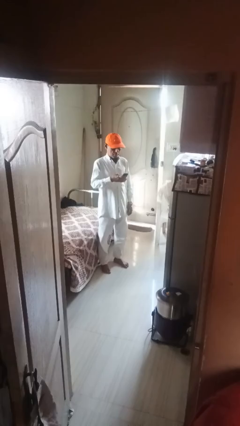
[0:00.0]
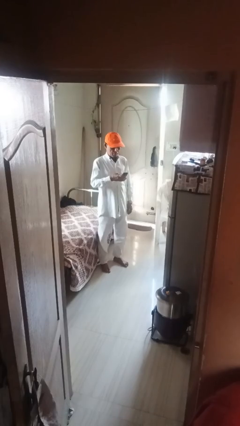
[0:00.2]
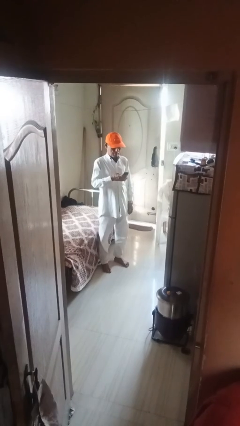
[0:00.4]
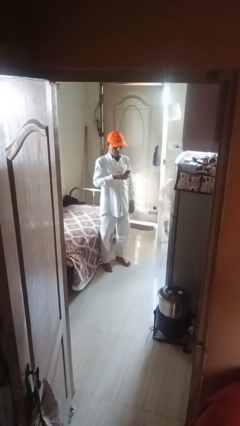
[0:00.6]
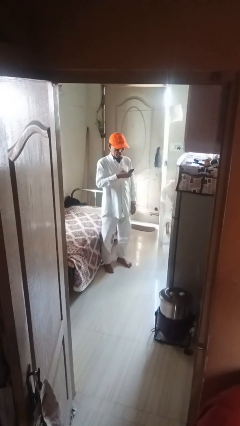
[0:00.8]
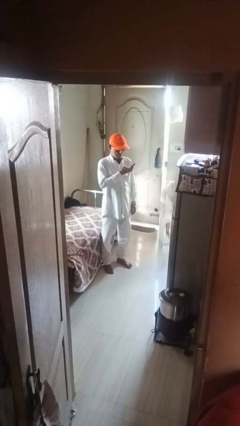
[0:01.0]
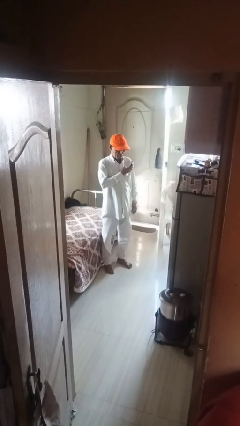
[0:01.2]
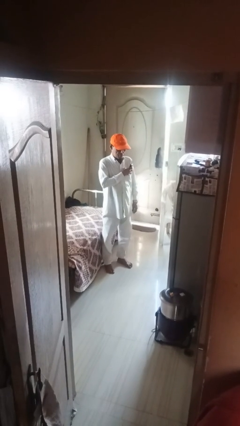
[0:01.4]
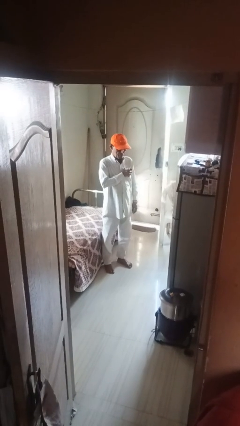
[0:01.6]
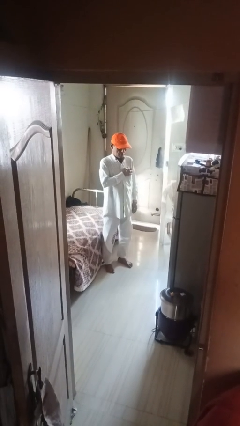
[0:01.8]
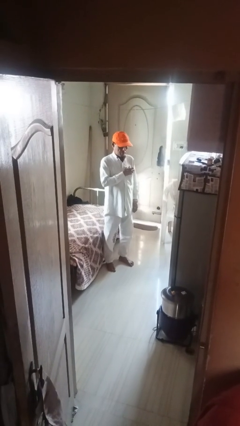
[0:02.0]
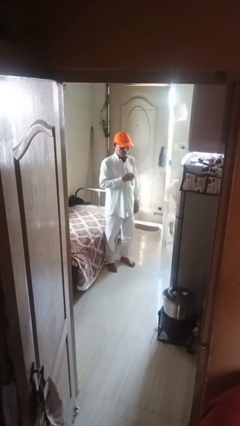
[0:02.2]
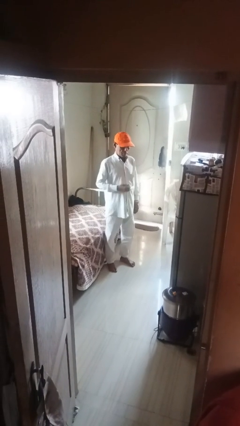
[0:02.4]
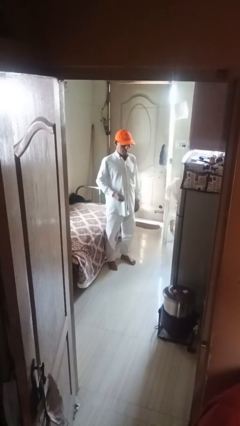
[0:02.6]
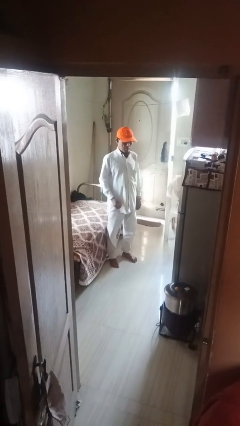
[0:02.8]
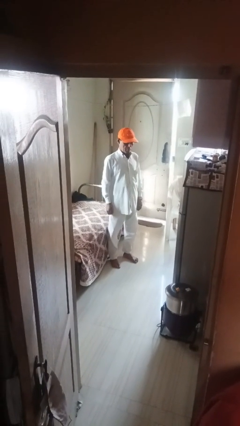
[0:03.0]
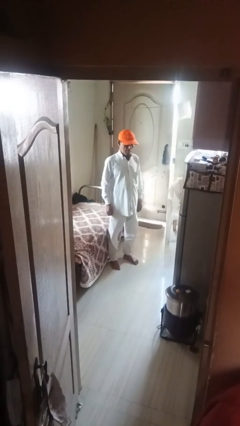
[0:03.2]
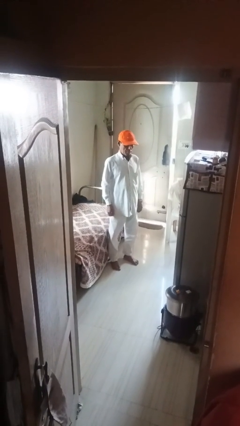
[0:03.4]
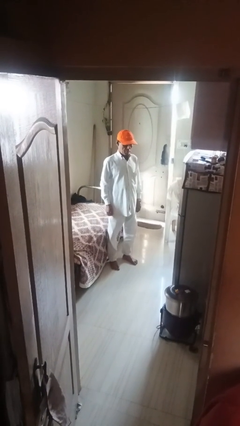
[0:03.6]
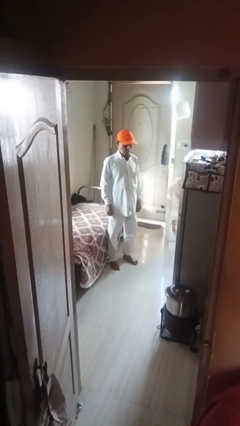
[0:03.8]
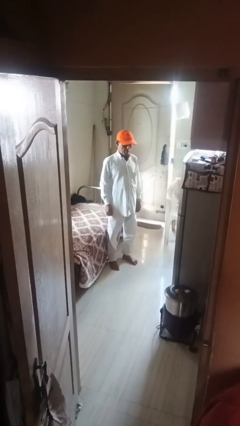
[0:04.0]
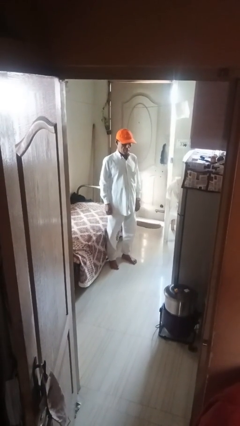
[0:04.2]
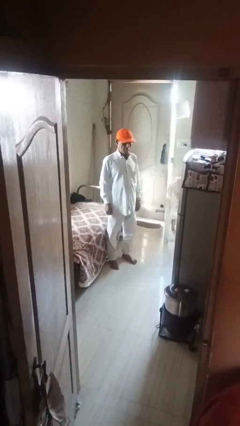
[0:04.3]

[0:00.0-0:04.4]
person puts phone into pocket

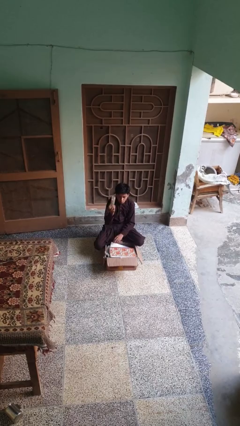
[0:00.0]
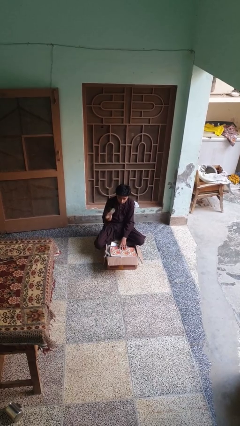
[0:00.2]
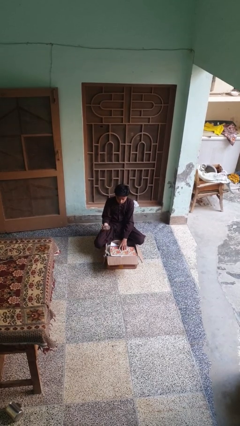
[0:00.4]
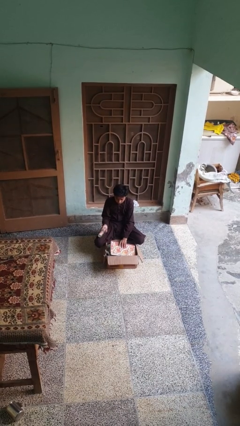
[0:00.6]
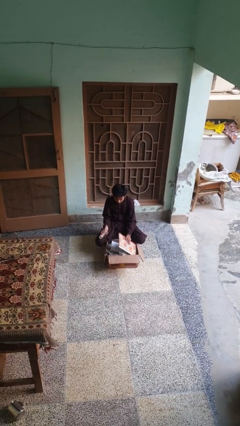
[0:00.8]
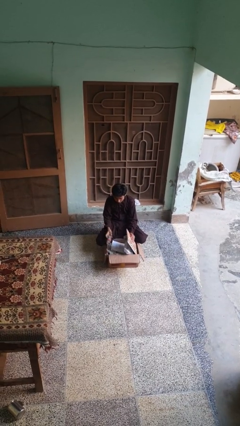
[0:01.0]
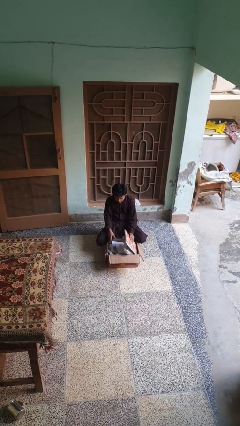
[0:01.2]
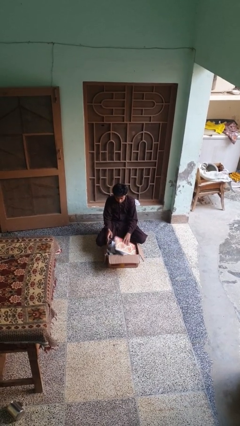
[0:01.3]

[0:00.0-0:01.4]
person puts object into box

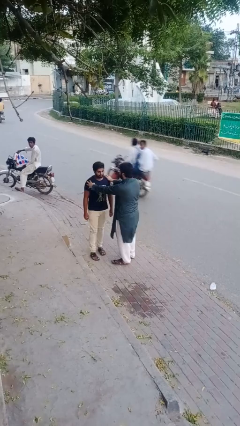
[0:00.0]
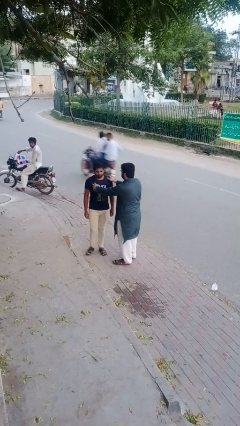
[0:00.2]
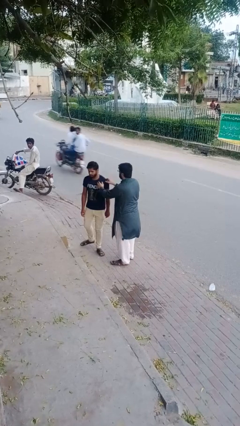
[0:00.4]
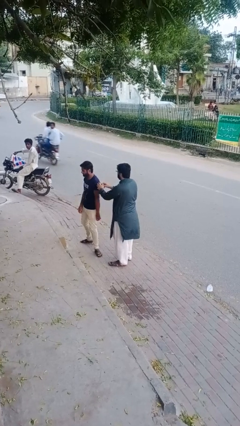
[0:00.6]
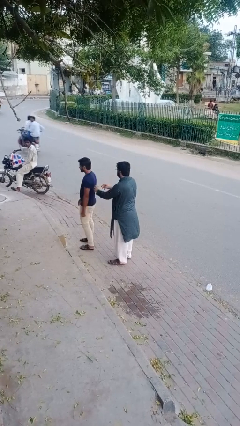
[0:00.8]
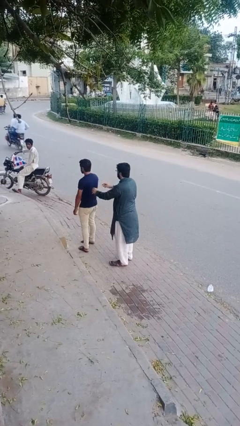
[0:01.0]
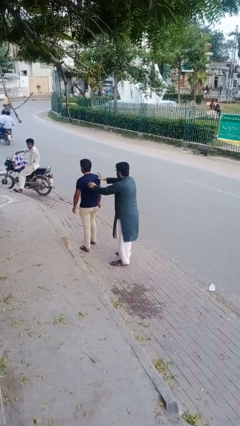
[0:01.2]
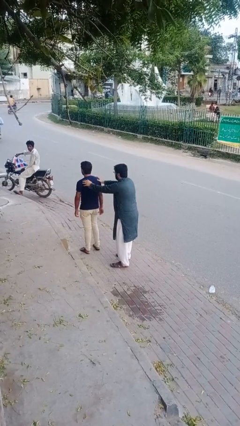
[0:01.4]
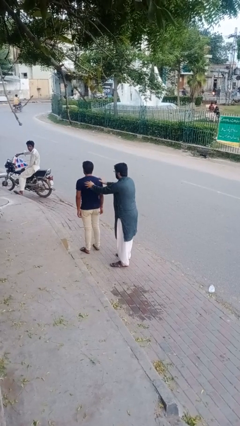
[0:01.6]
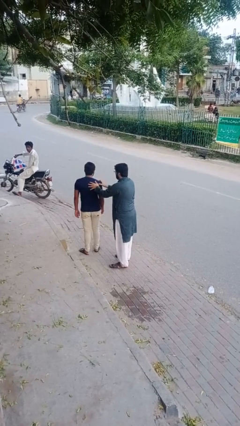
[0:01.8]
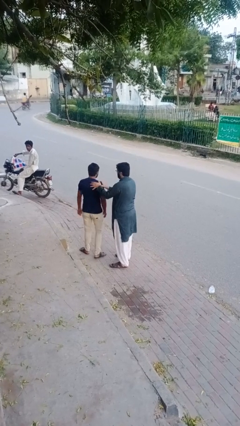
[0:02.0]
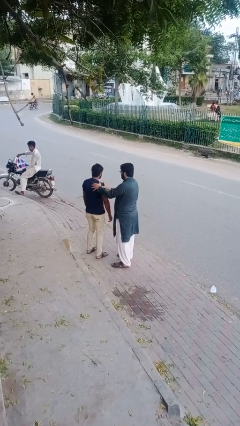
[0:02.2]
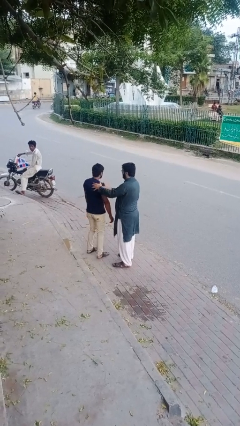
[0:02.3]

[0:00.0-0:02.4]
person grabs person by shoulder

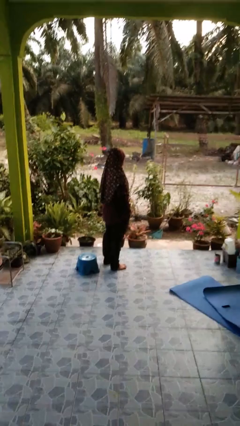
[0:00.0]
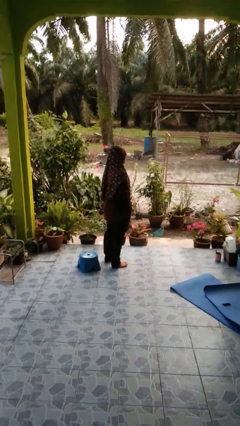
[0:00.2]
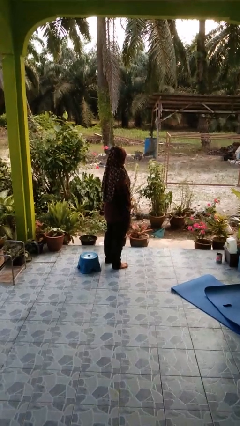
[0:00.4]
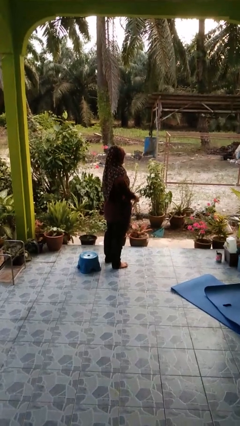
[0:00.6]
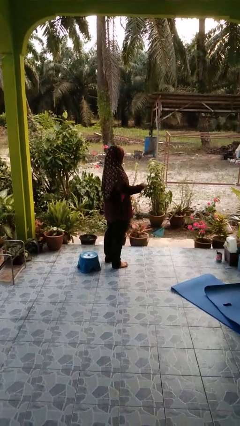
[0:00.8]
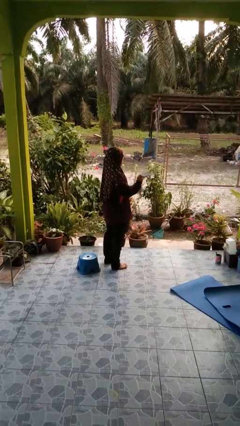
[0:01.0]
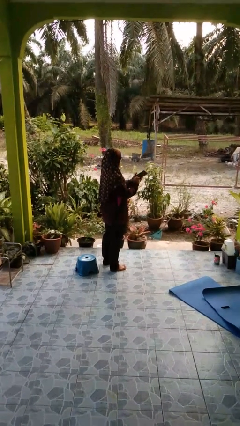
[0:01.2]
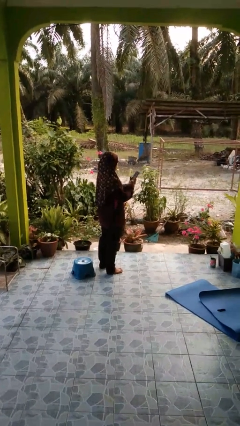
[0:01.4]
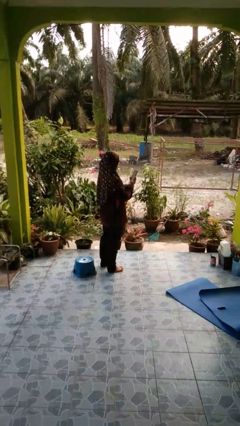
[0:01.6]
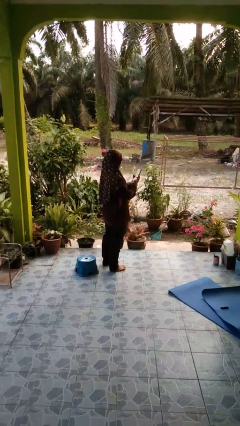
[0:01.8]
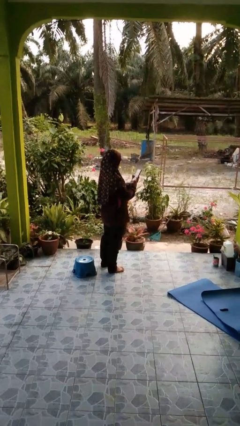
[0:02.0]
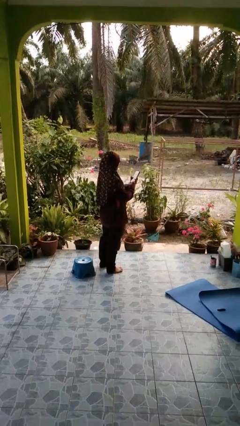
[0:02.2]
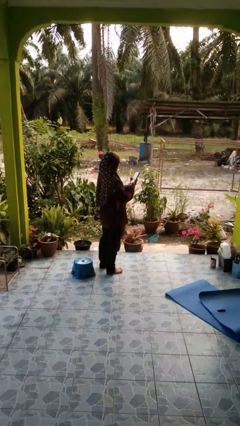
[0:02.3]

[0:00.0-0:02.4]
person takes phone from pocket

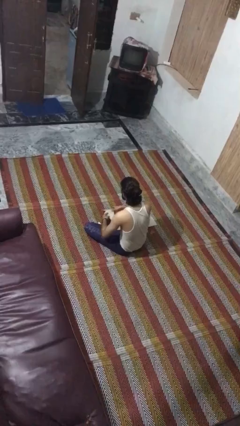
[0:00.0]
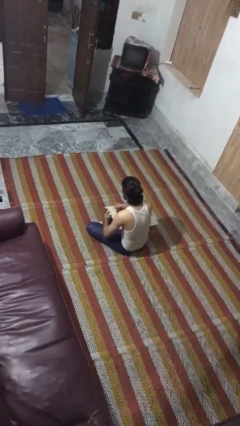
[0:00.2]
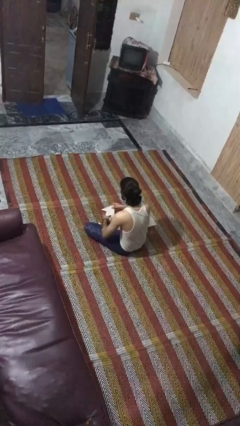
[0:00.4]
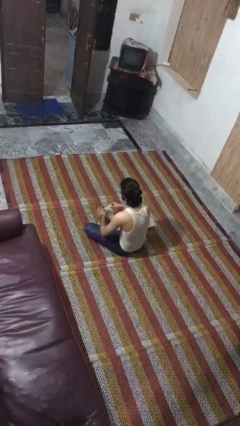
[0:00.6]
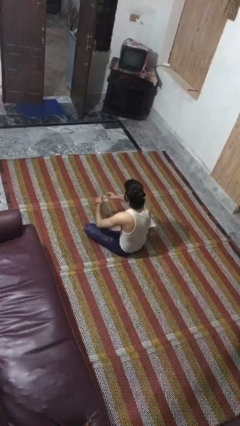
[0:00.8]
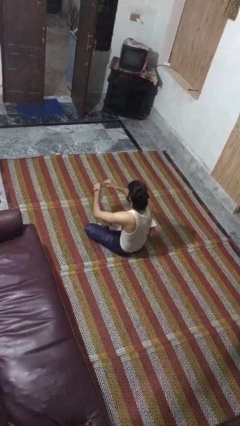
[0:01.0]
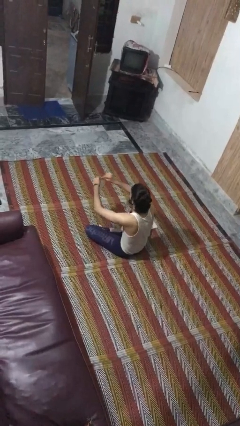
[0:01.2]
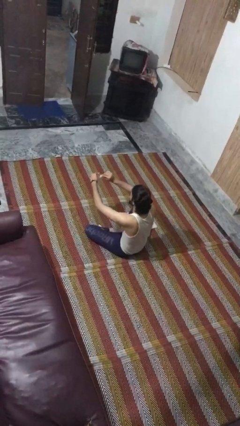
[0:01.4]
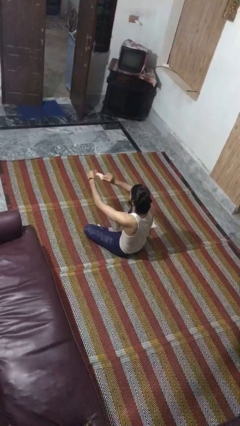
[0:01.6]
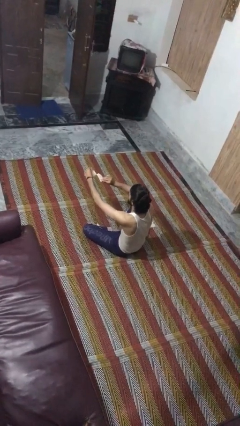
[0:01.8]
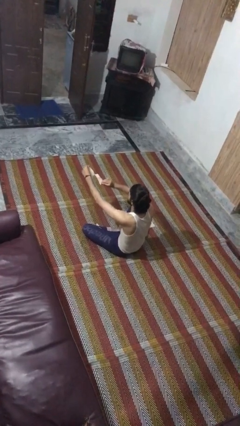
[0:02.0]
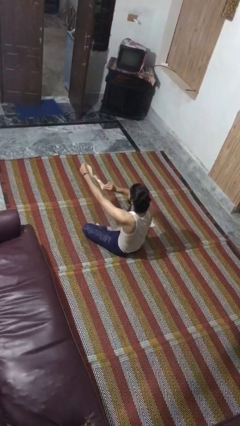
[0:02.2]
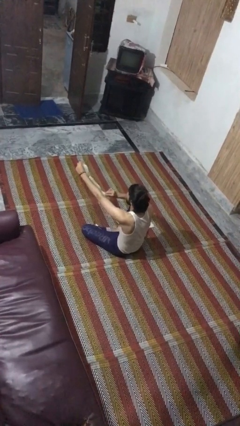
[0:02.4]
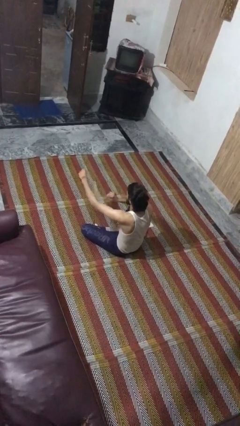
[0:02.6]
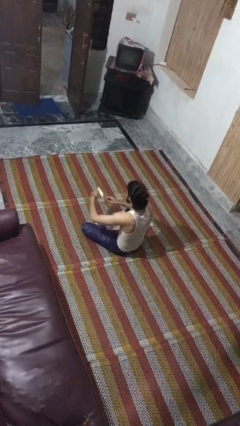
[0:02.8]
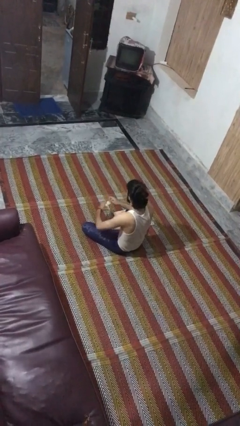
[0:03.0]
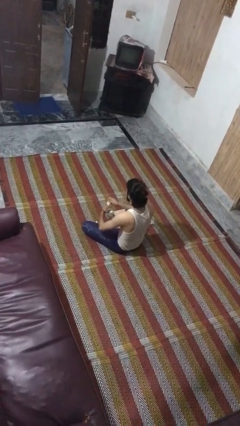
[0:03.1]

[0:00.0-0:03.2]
person tears paper

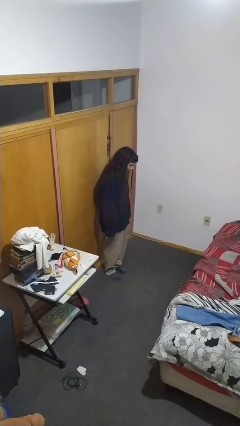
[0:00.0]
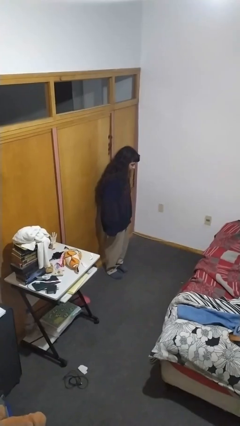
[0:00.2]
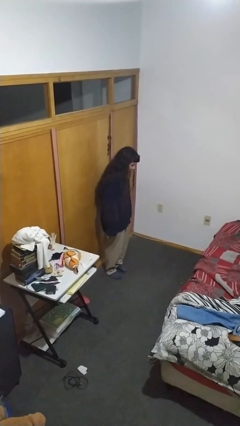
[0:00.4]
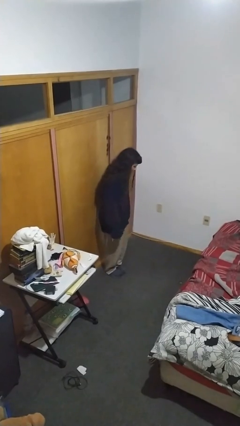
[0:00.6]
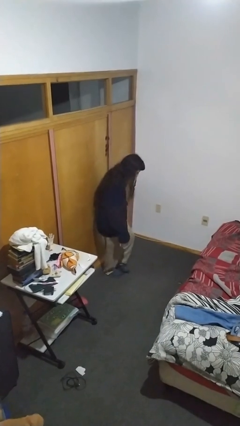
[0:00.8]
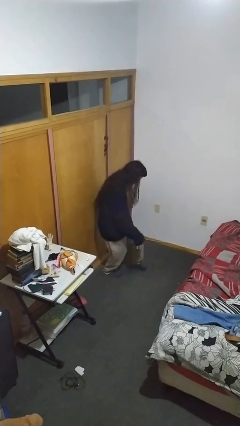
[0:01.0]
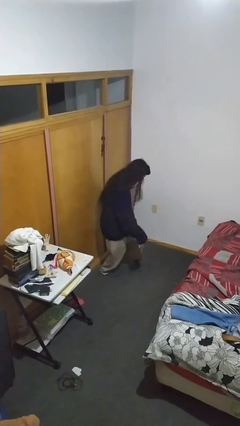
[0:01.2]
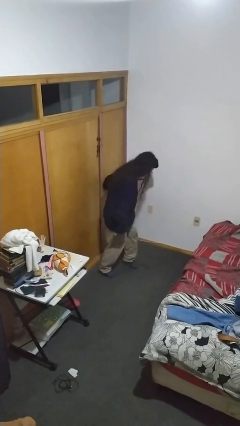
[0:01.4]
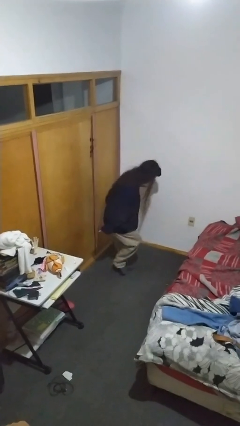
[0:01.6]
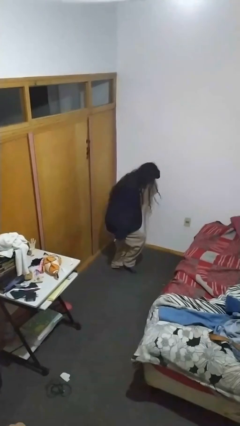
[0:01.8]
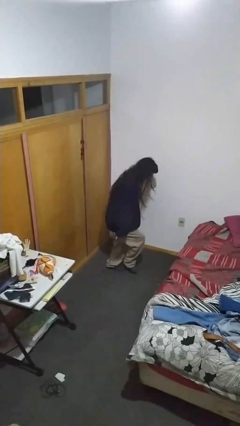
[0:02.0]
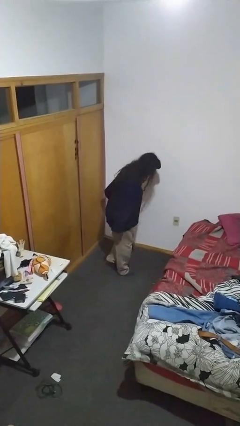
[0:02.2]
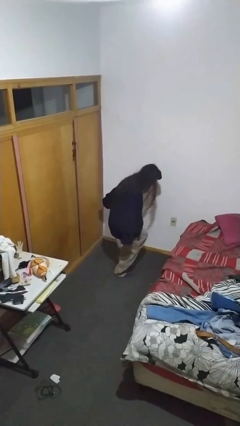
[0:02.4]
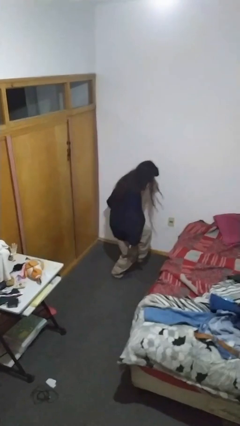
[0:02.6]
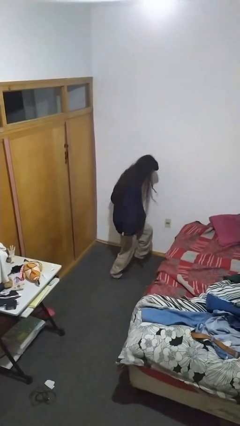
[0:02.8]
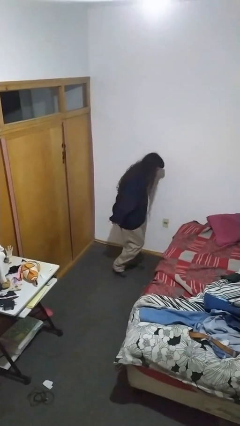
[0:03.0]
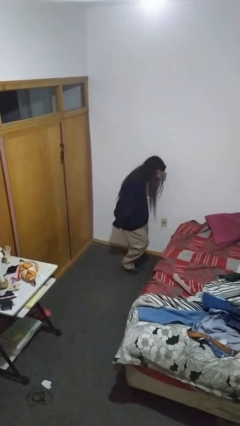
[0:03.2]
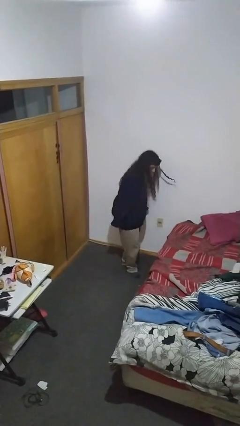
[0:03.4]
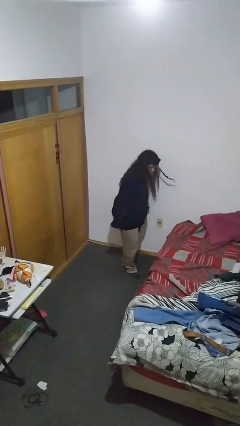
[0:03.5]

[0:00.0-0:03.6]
person walks tiptoe
